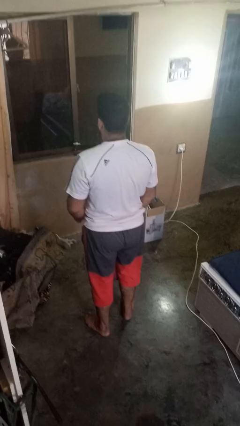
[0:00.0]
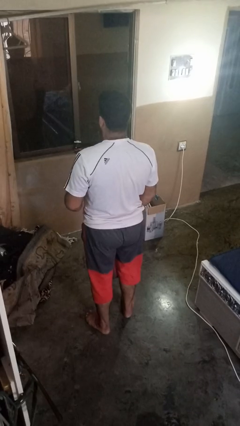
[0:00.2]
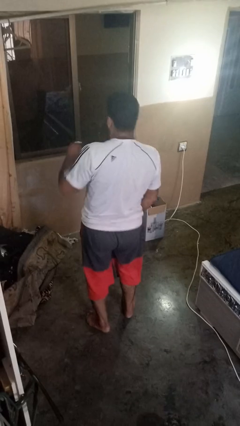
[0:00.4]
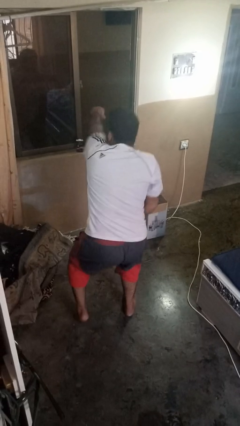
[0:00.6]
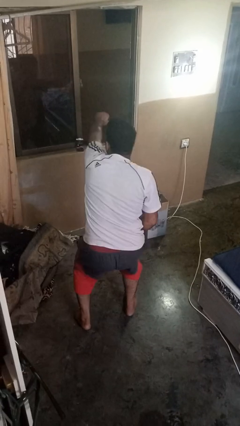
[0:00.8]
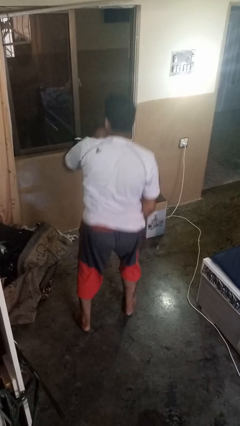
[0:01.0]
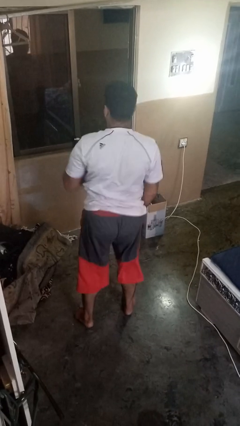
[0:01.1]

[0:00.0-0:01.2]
person karate chop

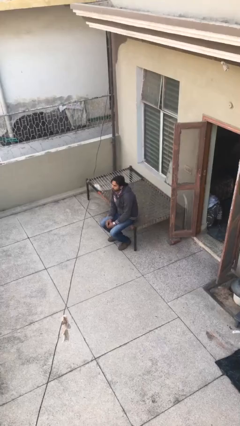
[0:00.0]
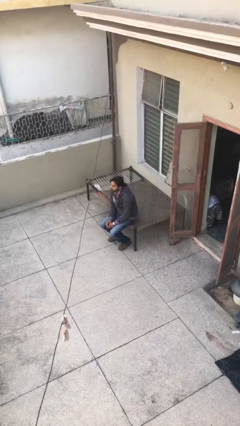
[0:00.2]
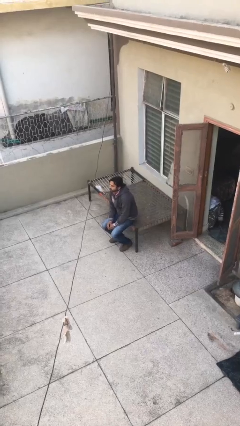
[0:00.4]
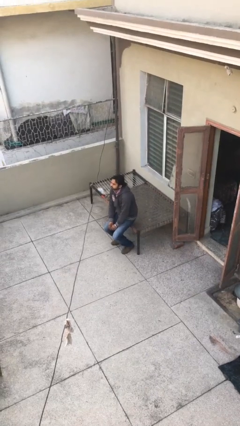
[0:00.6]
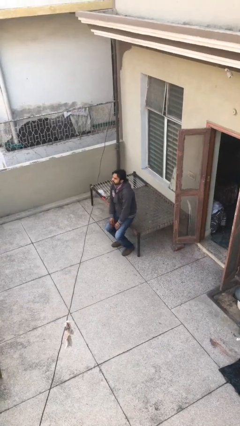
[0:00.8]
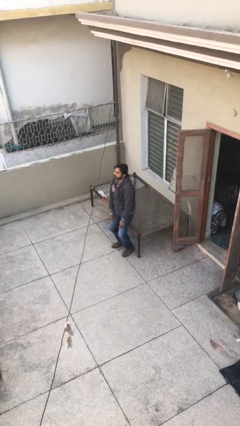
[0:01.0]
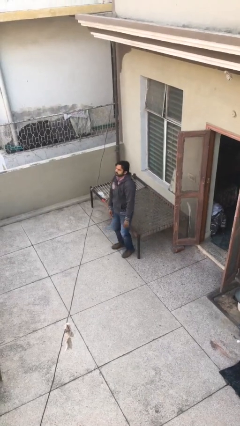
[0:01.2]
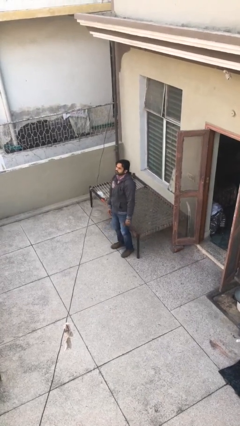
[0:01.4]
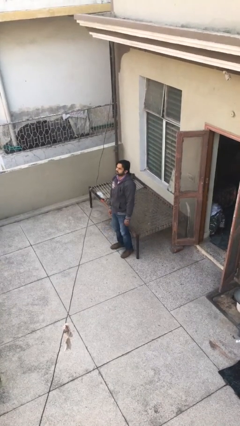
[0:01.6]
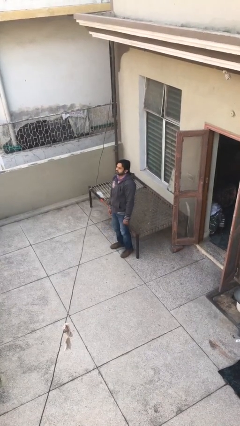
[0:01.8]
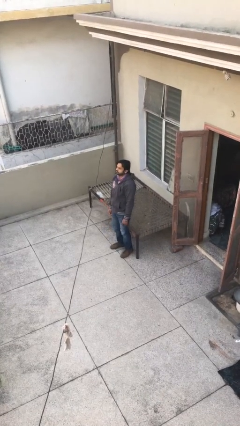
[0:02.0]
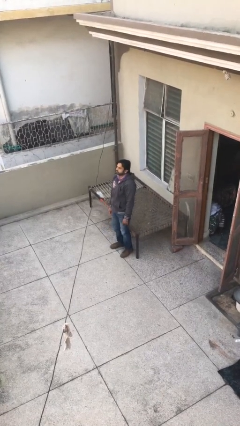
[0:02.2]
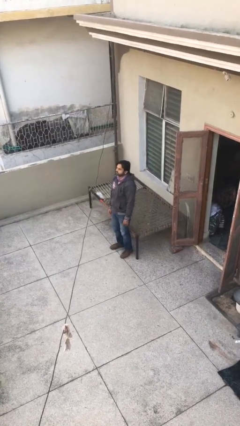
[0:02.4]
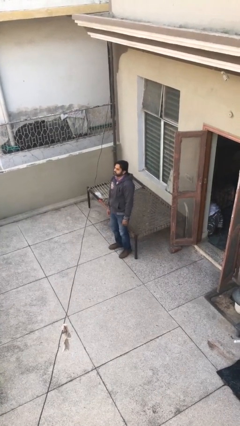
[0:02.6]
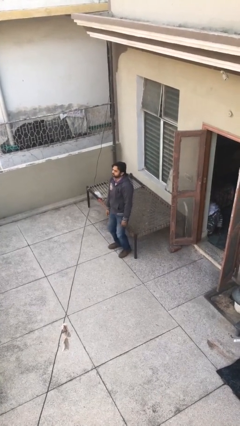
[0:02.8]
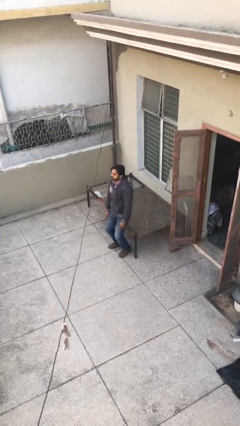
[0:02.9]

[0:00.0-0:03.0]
person stands up

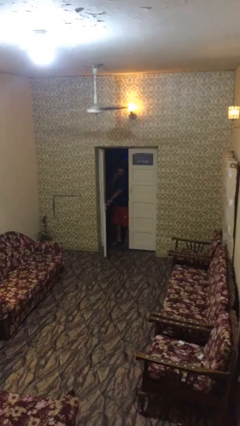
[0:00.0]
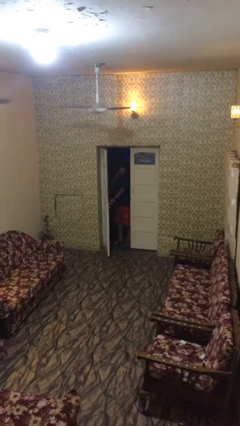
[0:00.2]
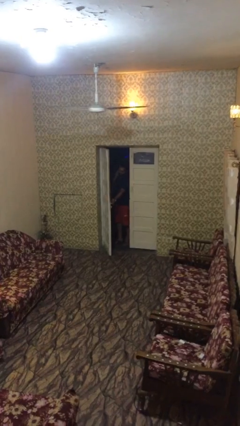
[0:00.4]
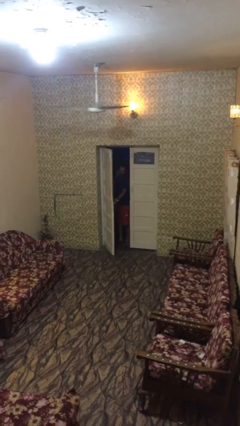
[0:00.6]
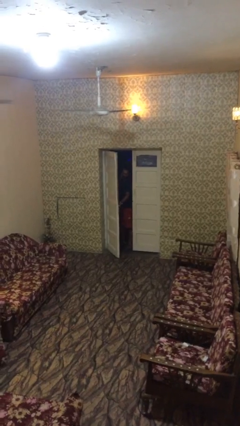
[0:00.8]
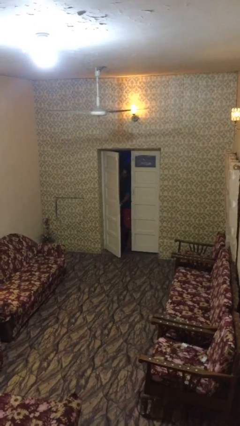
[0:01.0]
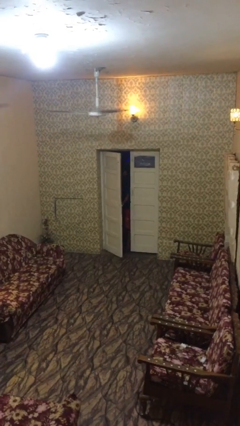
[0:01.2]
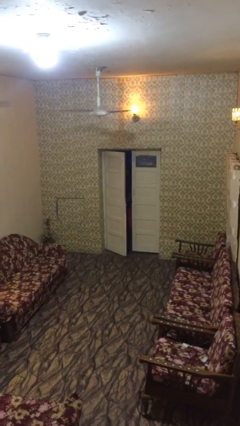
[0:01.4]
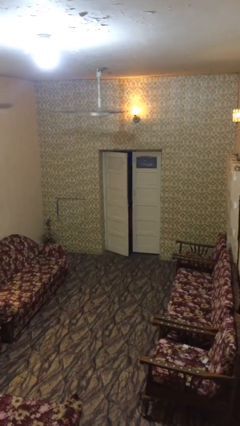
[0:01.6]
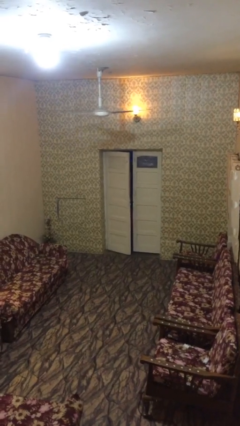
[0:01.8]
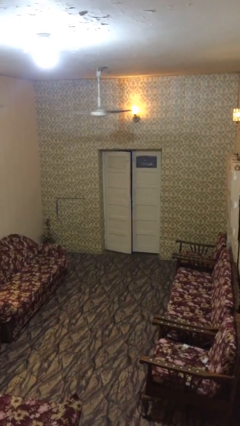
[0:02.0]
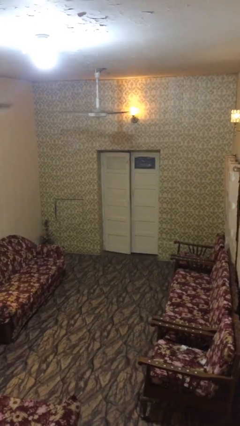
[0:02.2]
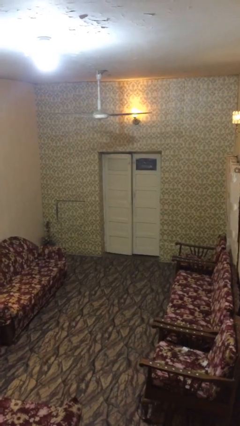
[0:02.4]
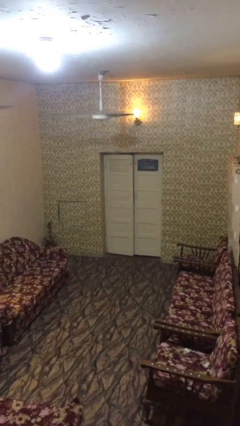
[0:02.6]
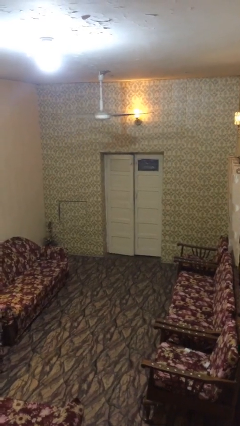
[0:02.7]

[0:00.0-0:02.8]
person closes facility door

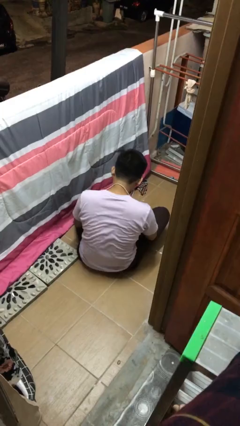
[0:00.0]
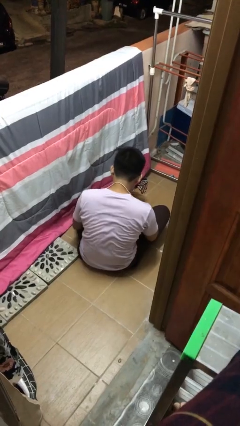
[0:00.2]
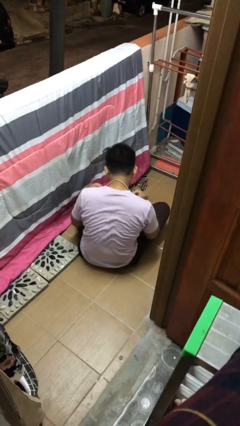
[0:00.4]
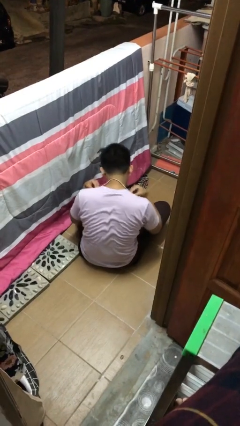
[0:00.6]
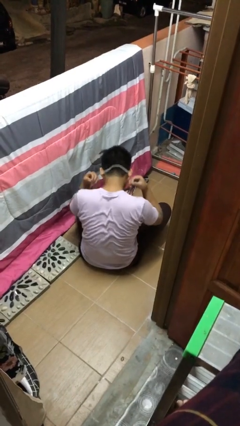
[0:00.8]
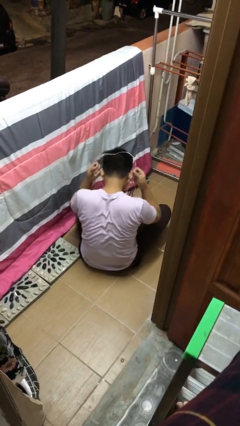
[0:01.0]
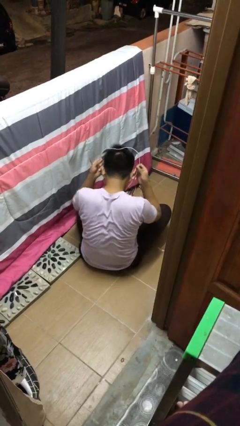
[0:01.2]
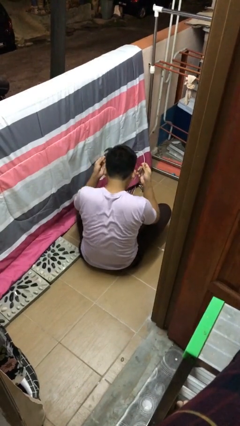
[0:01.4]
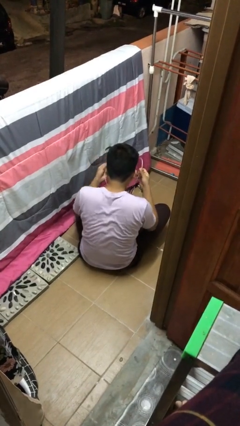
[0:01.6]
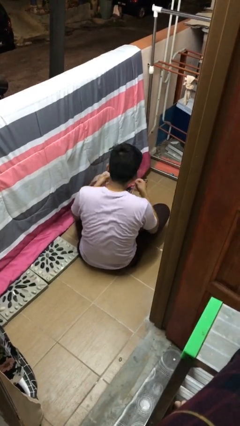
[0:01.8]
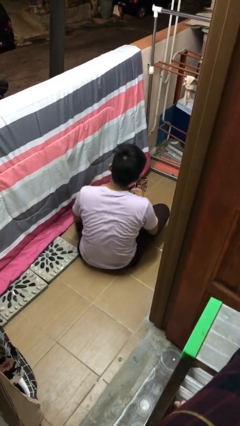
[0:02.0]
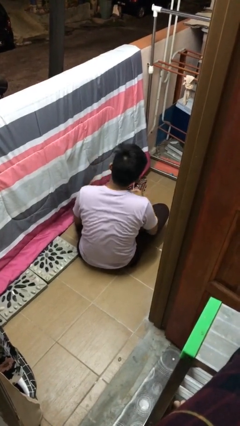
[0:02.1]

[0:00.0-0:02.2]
person takes off necklace

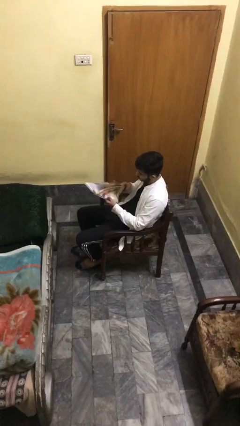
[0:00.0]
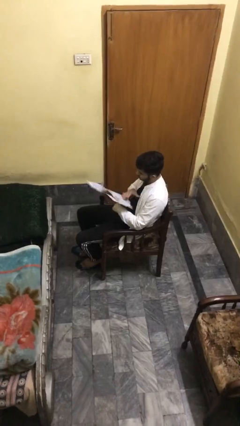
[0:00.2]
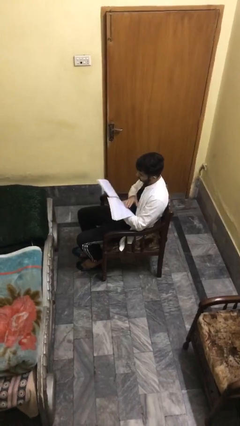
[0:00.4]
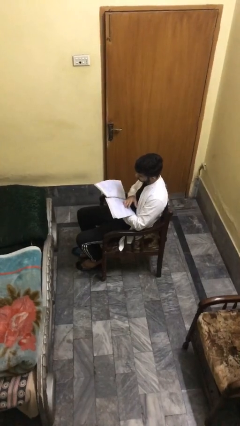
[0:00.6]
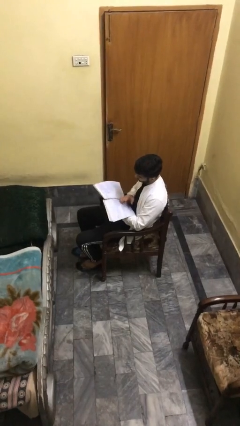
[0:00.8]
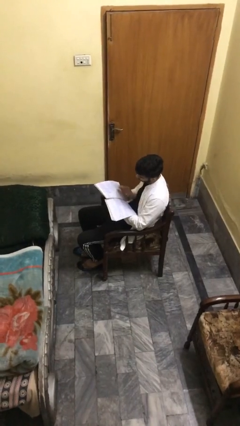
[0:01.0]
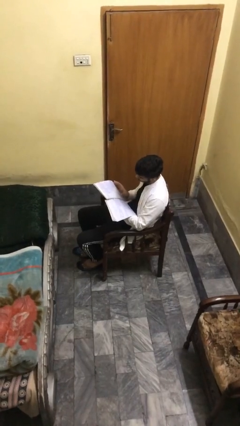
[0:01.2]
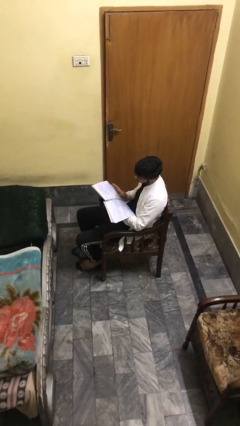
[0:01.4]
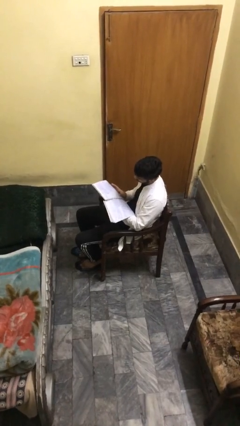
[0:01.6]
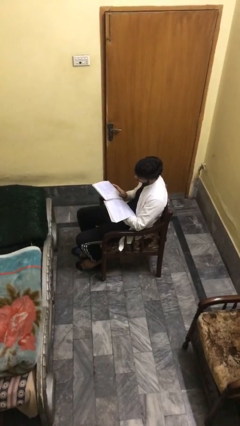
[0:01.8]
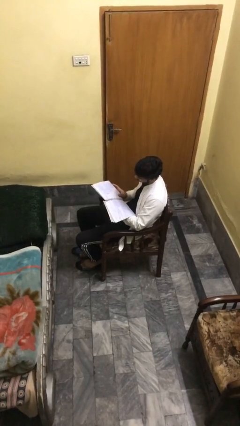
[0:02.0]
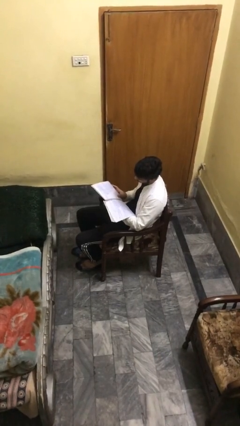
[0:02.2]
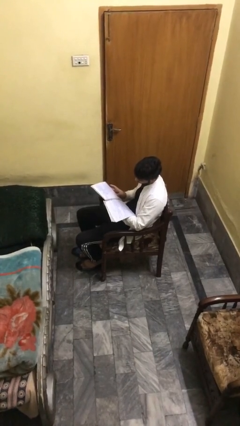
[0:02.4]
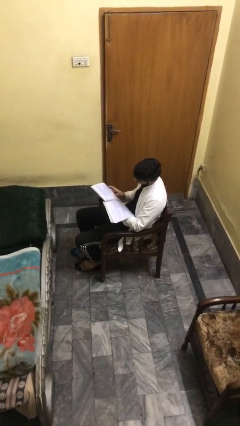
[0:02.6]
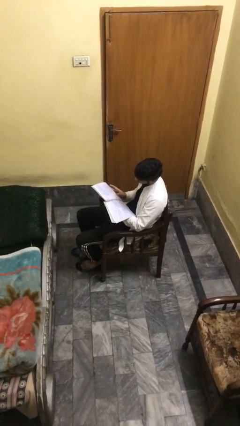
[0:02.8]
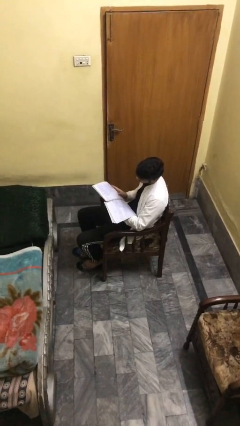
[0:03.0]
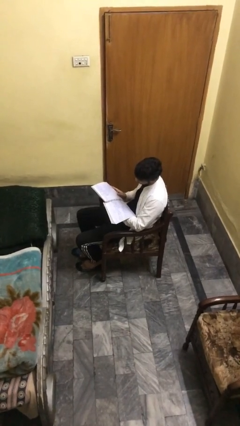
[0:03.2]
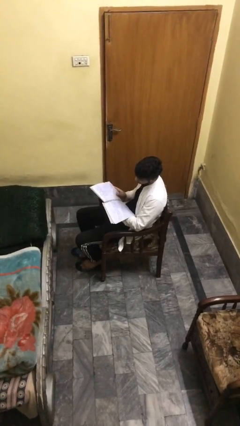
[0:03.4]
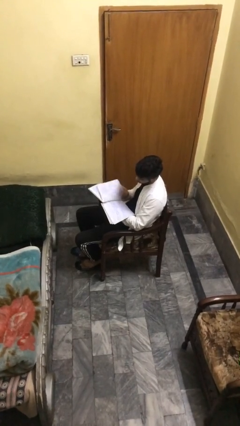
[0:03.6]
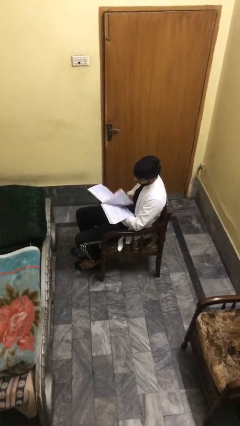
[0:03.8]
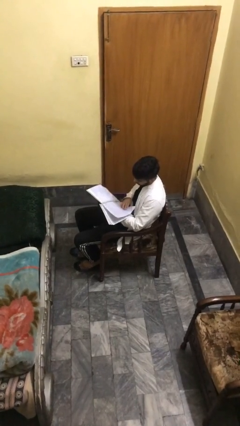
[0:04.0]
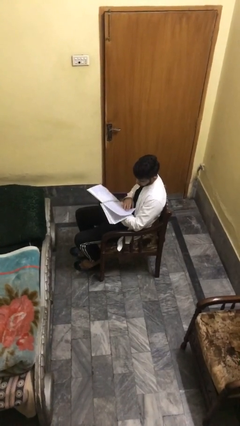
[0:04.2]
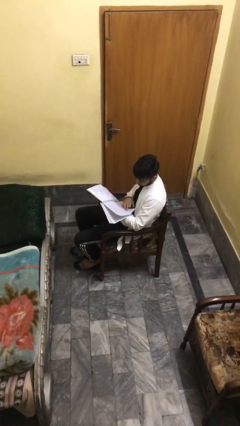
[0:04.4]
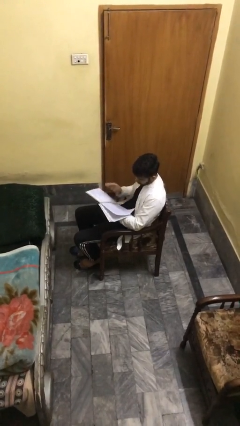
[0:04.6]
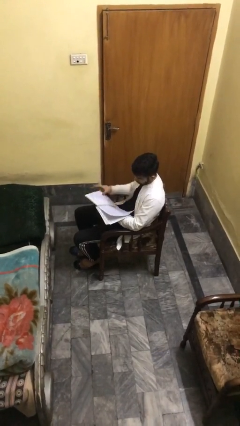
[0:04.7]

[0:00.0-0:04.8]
person reads document

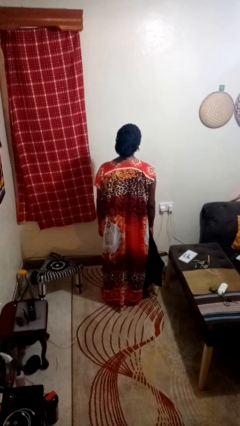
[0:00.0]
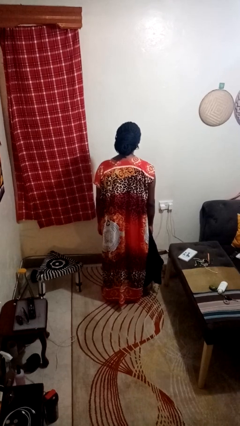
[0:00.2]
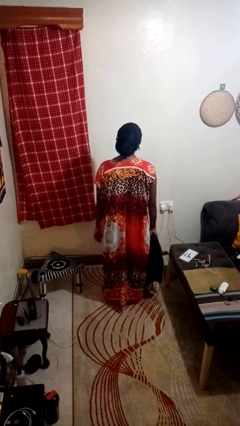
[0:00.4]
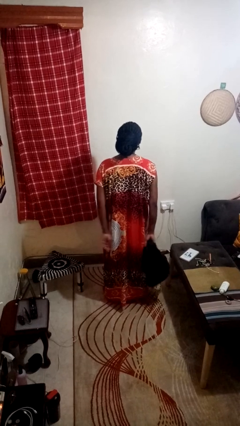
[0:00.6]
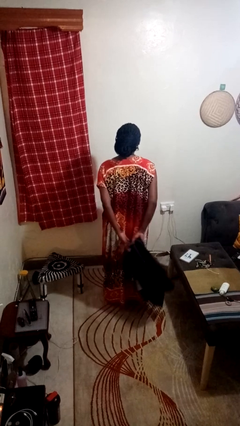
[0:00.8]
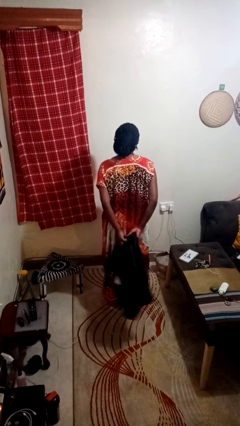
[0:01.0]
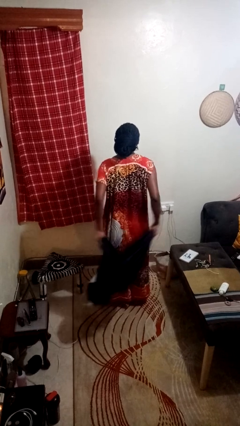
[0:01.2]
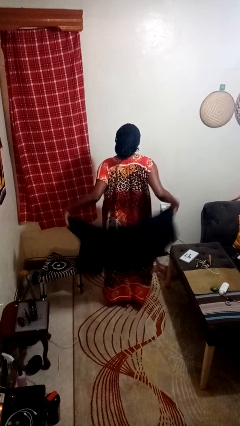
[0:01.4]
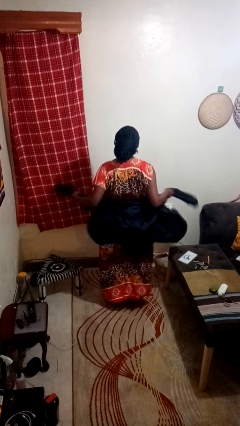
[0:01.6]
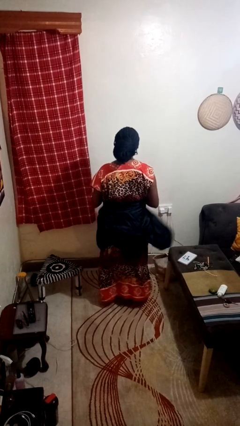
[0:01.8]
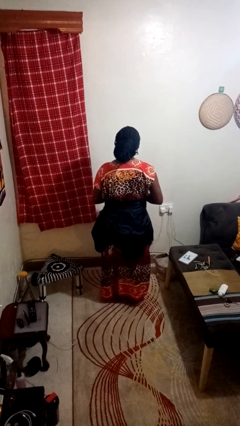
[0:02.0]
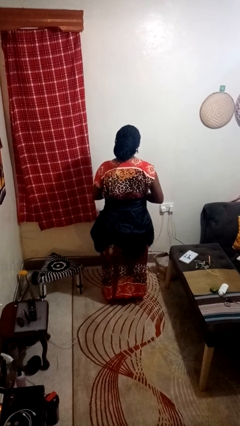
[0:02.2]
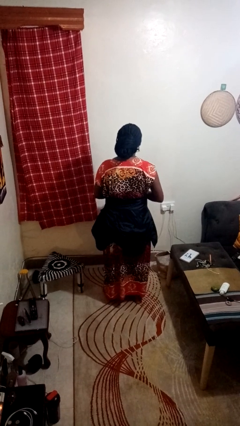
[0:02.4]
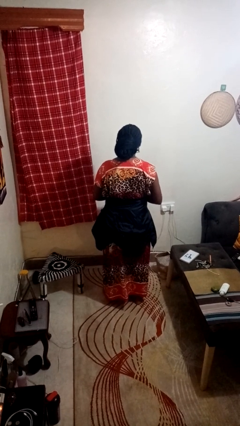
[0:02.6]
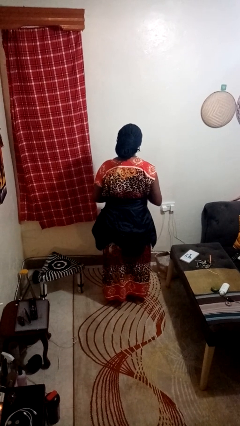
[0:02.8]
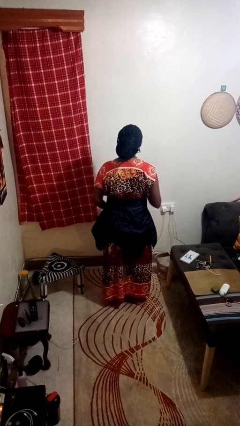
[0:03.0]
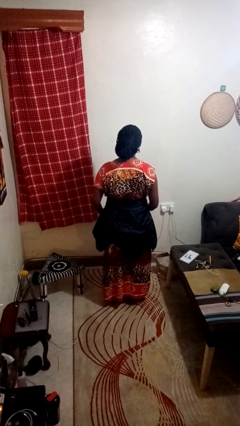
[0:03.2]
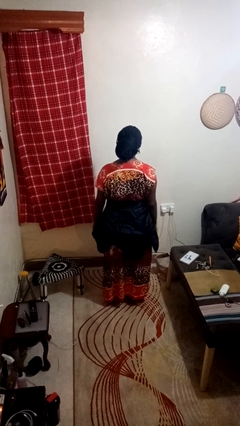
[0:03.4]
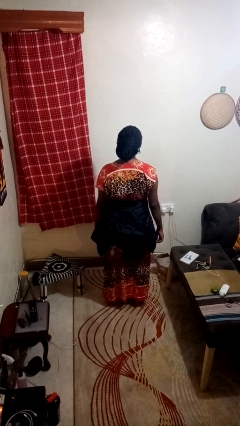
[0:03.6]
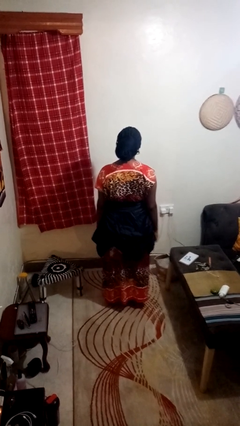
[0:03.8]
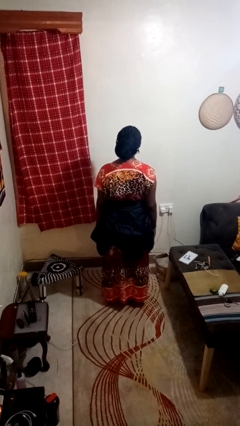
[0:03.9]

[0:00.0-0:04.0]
person ties jacket around waist
